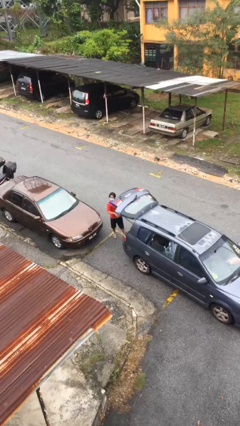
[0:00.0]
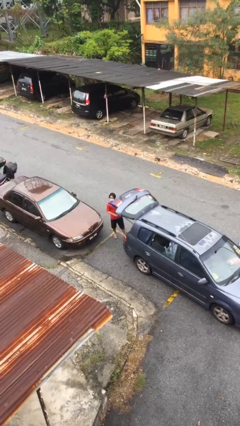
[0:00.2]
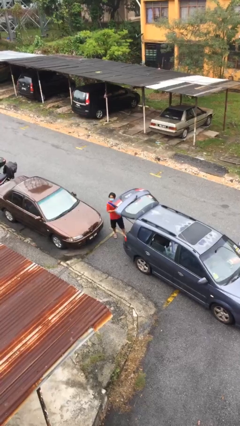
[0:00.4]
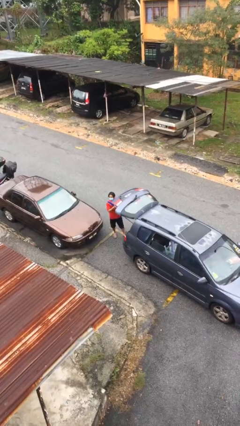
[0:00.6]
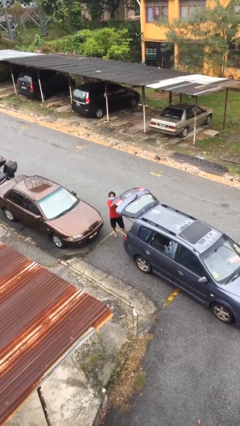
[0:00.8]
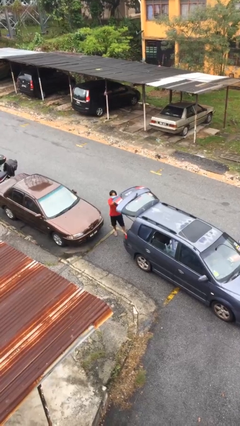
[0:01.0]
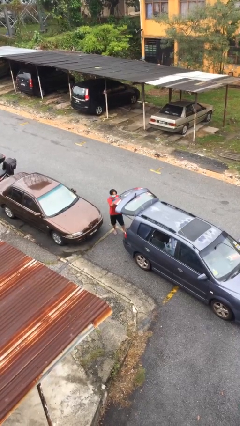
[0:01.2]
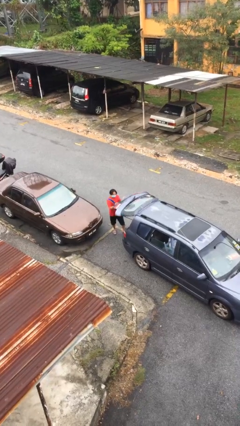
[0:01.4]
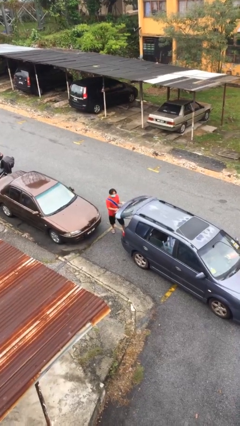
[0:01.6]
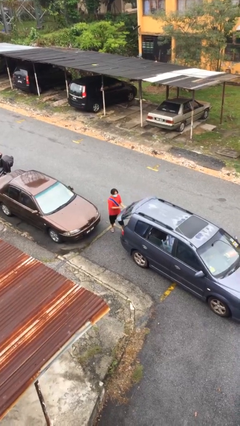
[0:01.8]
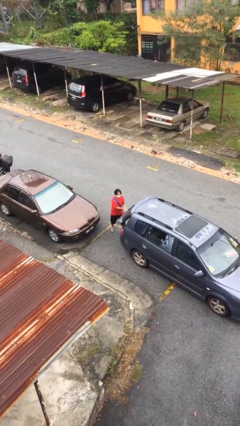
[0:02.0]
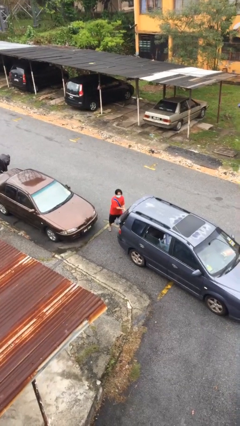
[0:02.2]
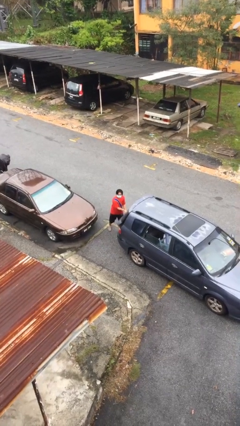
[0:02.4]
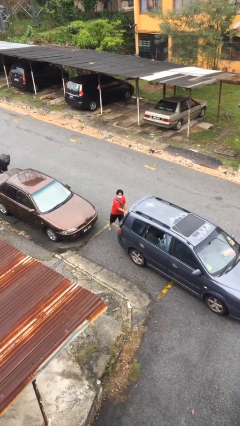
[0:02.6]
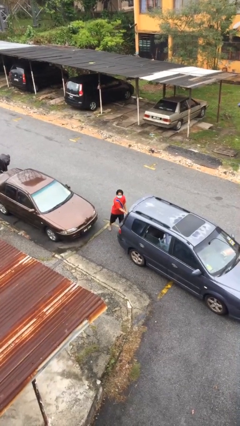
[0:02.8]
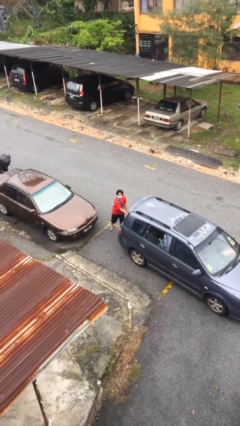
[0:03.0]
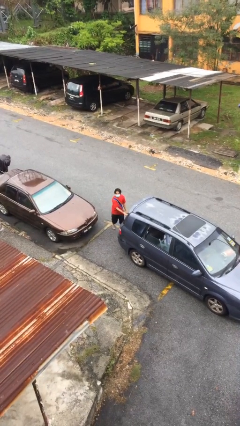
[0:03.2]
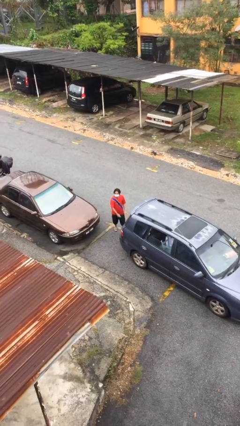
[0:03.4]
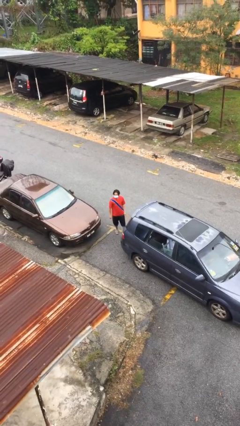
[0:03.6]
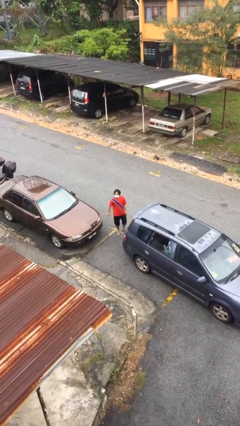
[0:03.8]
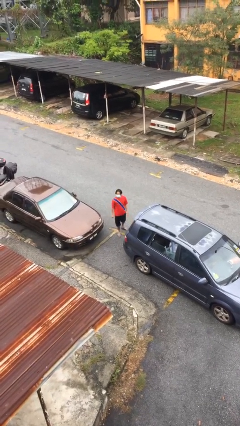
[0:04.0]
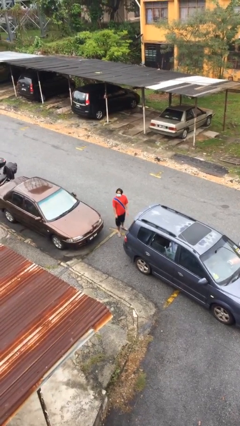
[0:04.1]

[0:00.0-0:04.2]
person closes car trunk

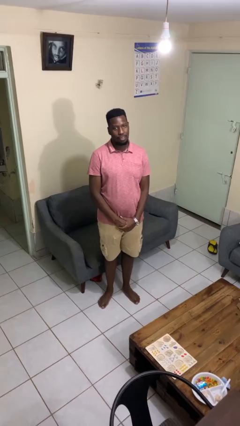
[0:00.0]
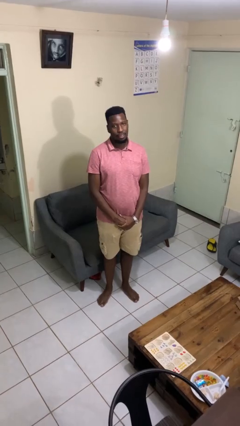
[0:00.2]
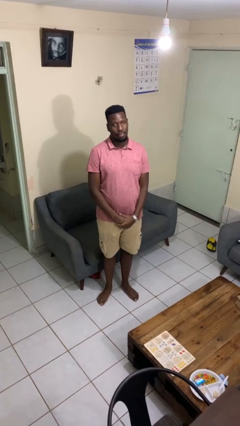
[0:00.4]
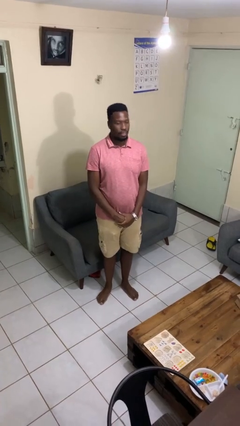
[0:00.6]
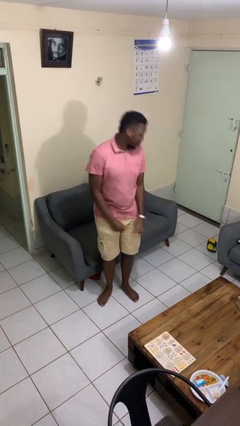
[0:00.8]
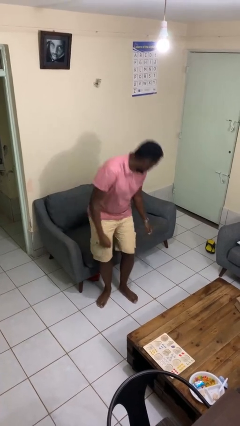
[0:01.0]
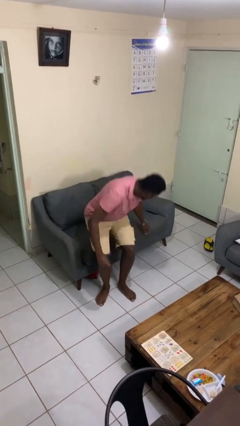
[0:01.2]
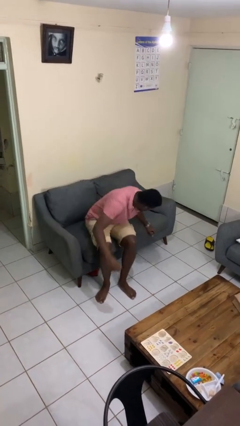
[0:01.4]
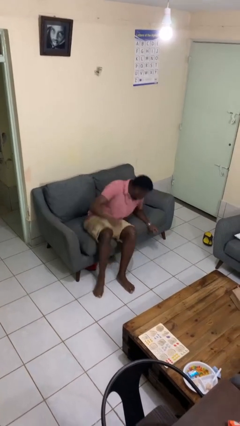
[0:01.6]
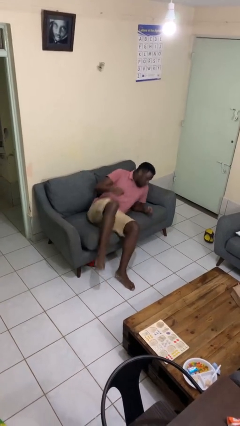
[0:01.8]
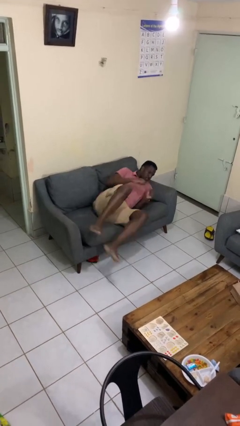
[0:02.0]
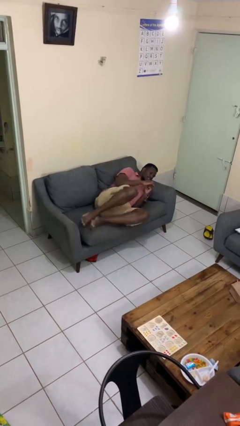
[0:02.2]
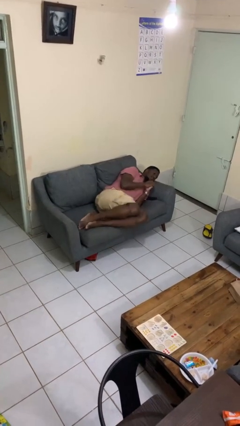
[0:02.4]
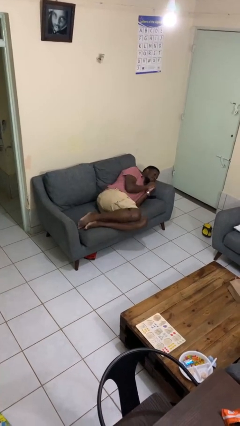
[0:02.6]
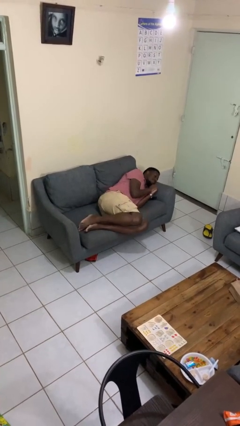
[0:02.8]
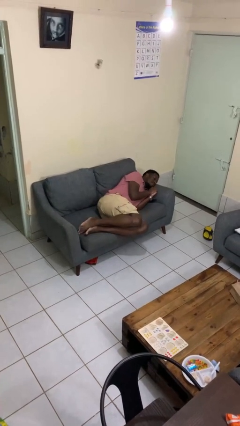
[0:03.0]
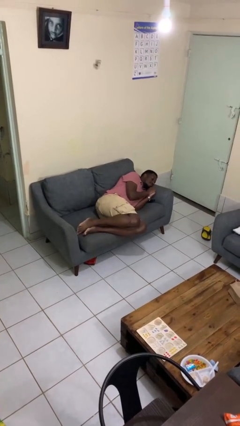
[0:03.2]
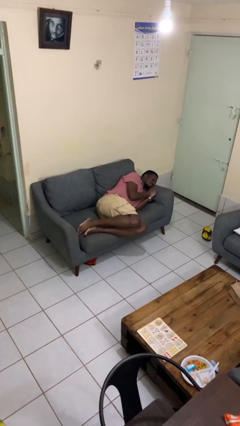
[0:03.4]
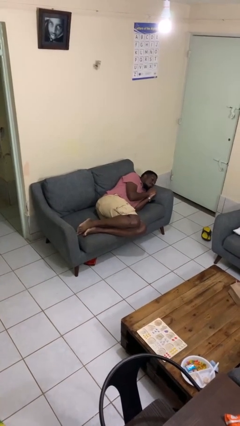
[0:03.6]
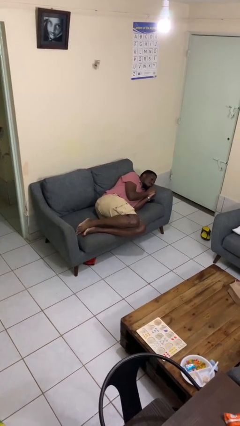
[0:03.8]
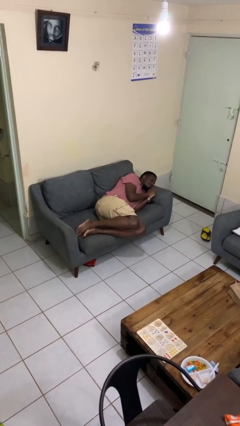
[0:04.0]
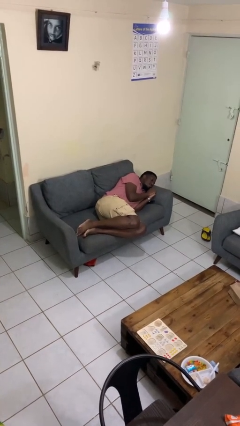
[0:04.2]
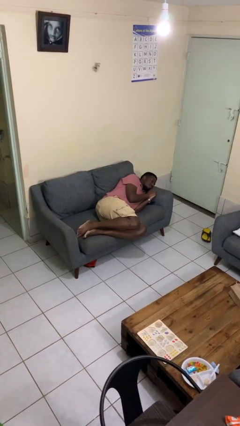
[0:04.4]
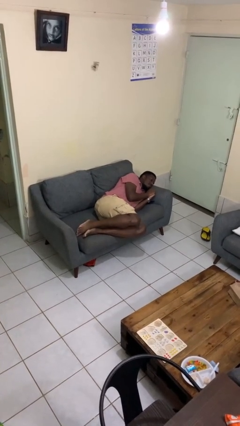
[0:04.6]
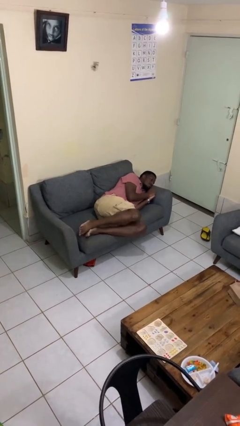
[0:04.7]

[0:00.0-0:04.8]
person lies down on couch

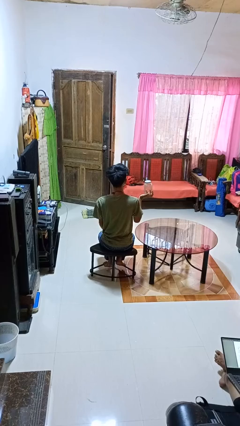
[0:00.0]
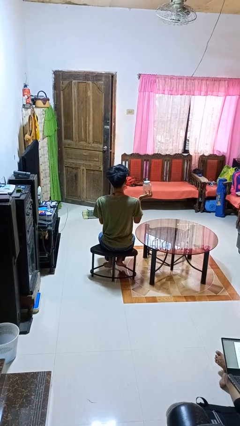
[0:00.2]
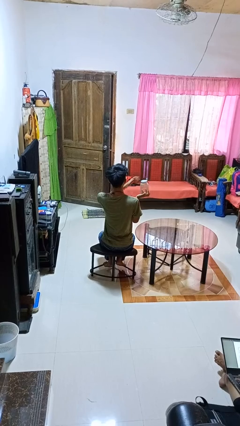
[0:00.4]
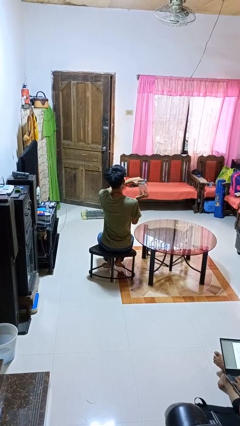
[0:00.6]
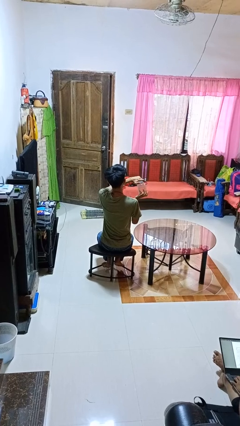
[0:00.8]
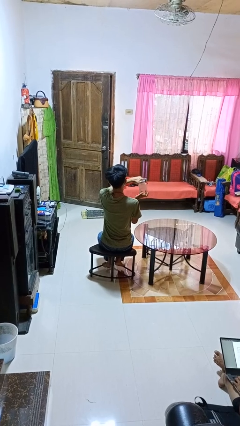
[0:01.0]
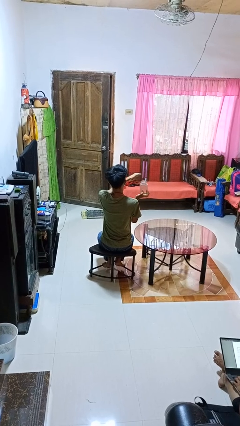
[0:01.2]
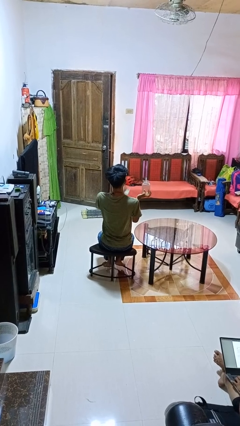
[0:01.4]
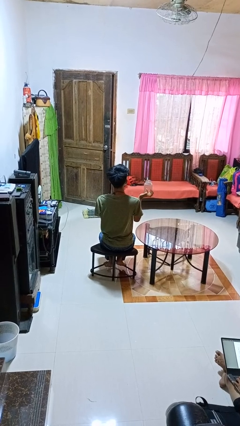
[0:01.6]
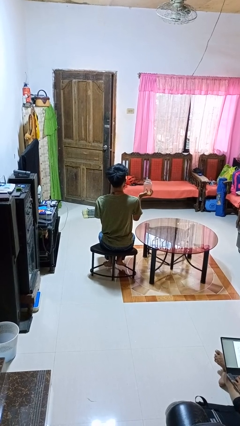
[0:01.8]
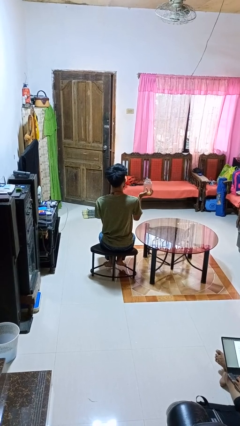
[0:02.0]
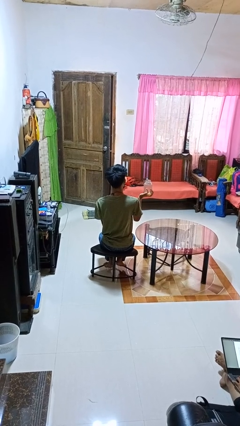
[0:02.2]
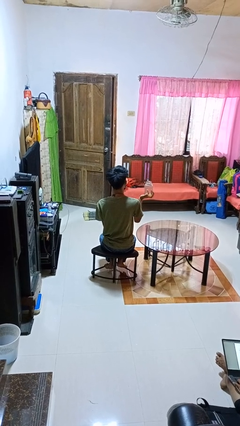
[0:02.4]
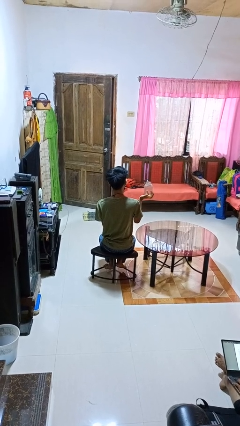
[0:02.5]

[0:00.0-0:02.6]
person opens jar

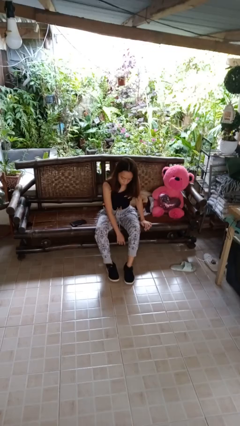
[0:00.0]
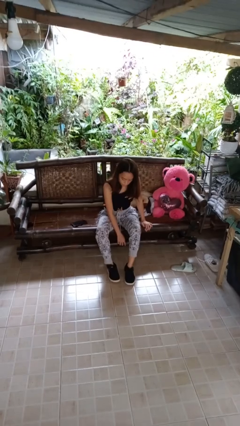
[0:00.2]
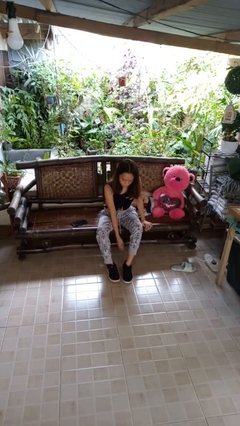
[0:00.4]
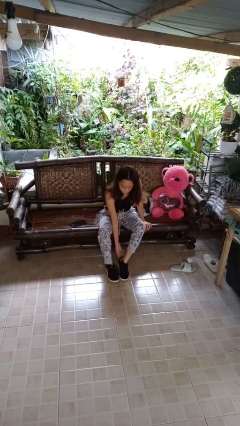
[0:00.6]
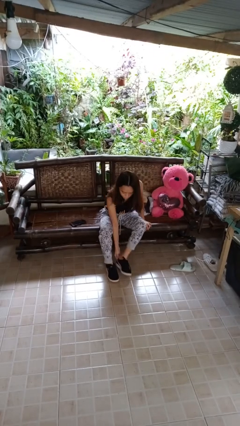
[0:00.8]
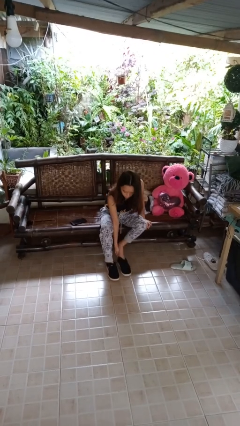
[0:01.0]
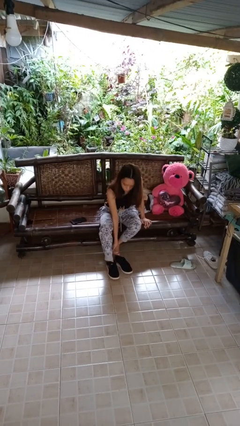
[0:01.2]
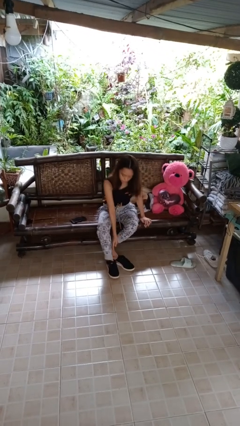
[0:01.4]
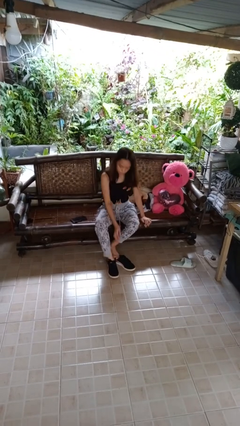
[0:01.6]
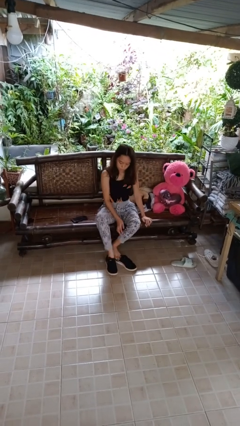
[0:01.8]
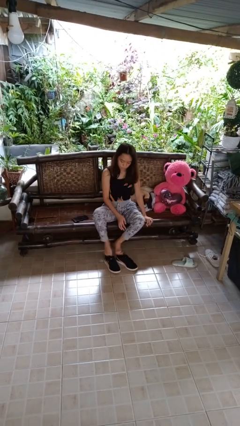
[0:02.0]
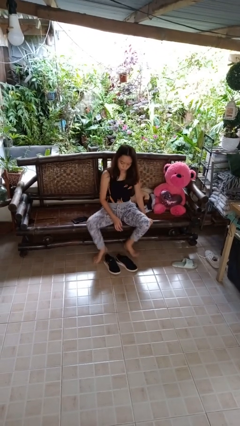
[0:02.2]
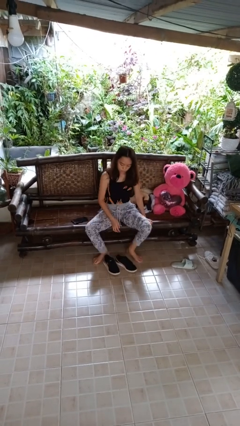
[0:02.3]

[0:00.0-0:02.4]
person takes off shoes

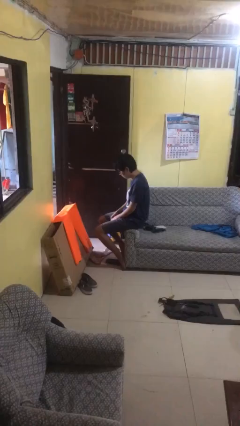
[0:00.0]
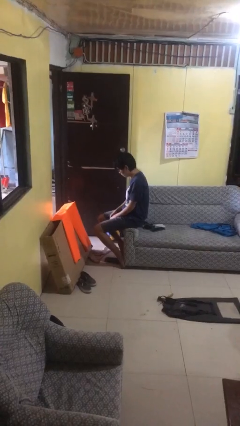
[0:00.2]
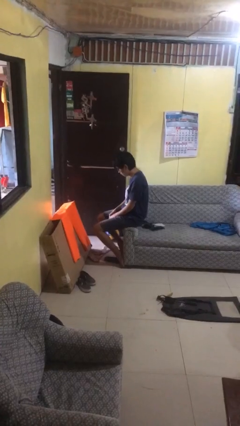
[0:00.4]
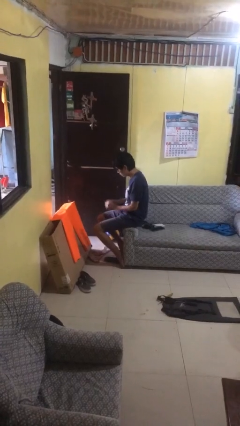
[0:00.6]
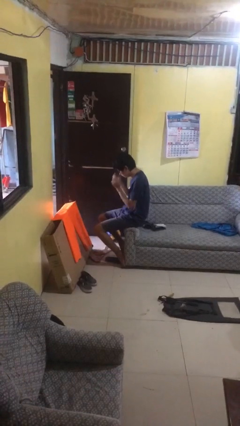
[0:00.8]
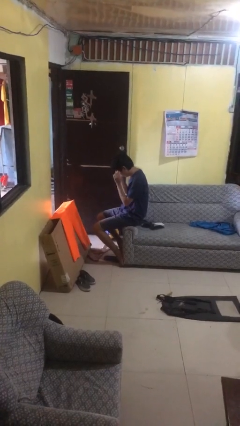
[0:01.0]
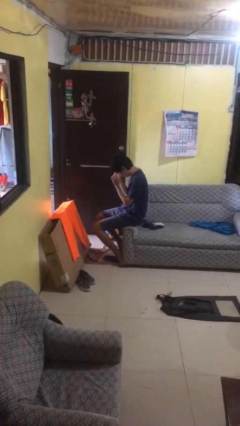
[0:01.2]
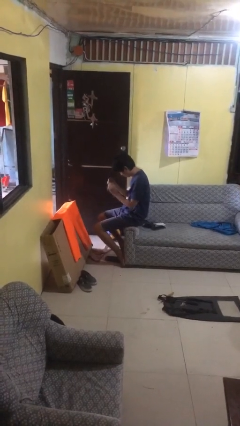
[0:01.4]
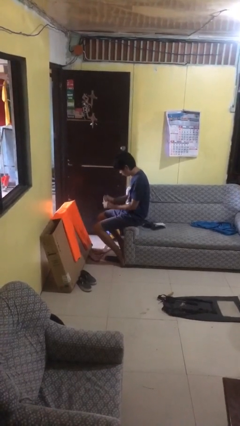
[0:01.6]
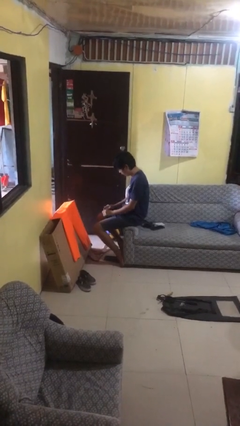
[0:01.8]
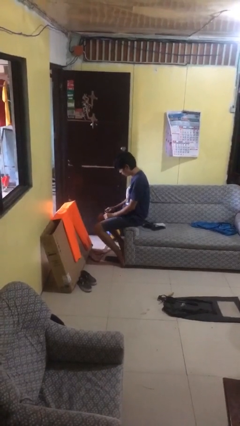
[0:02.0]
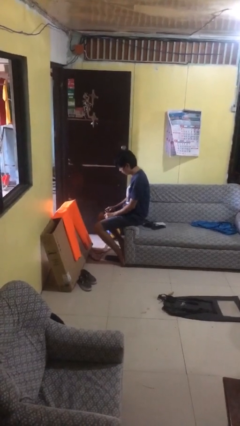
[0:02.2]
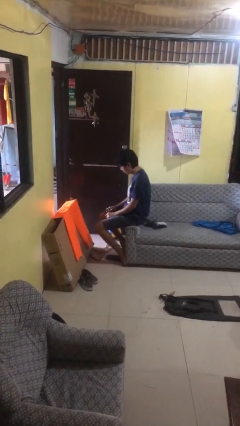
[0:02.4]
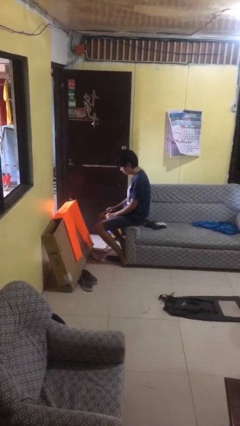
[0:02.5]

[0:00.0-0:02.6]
person takes off glasses

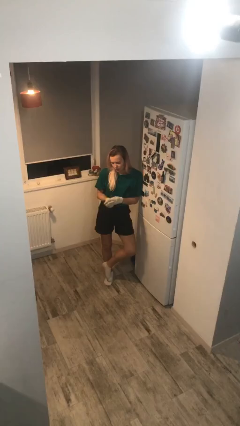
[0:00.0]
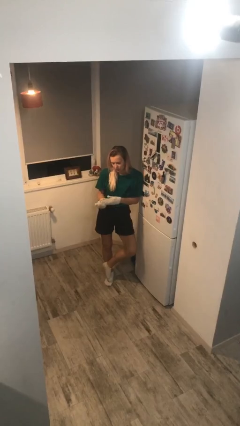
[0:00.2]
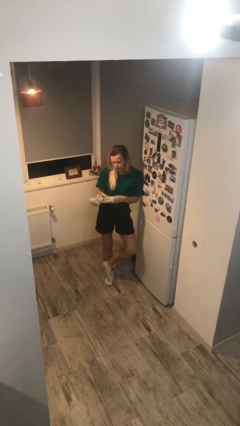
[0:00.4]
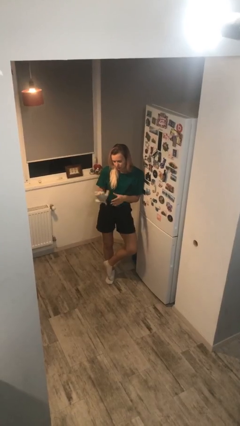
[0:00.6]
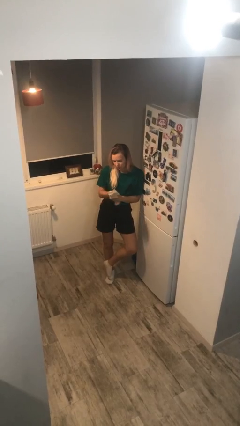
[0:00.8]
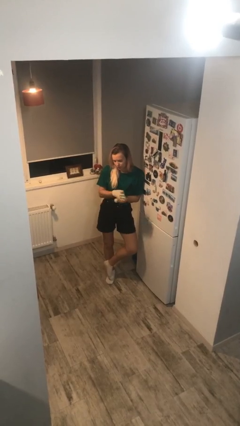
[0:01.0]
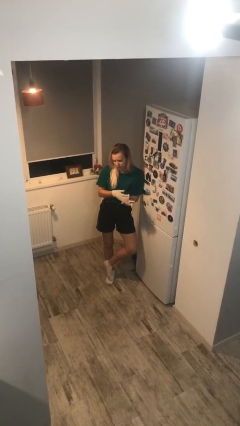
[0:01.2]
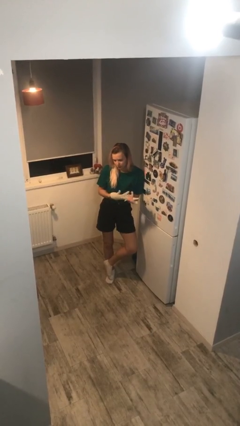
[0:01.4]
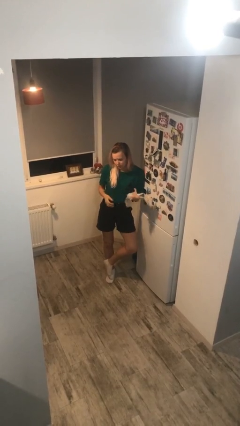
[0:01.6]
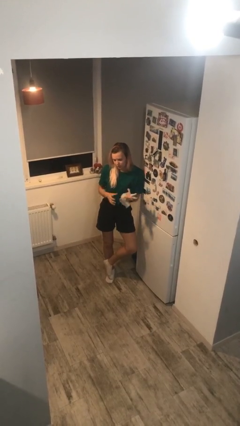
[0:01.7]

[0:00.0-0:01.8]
person takes off gloves
